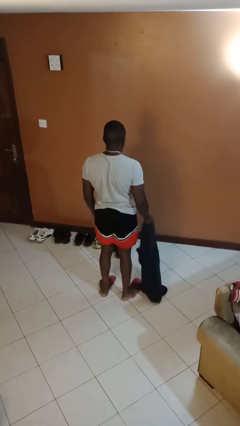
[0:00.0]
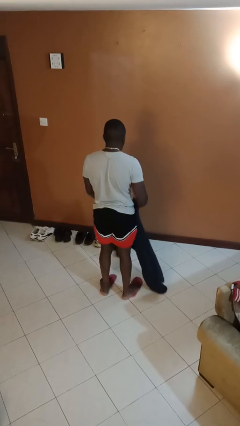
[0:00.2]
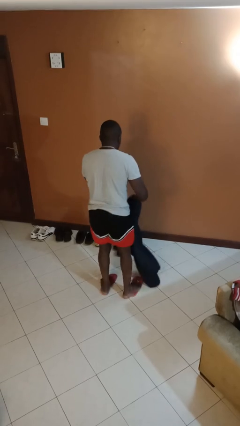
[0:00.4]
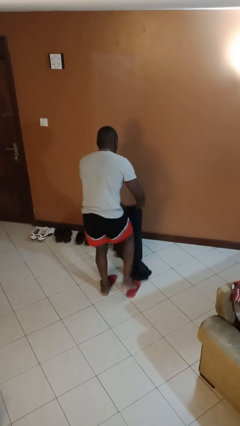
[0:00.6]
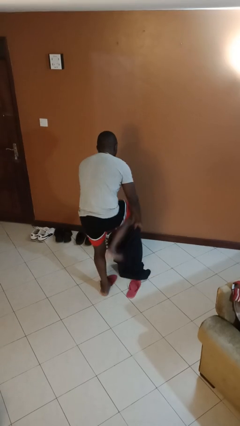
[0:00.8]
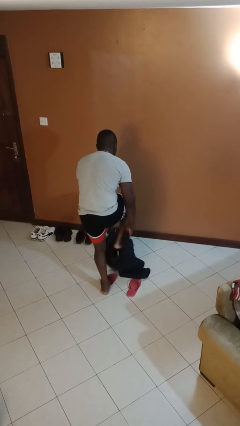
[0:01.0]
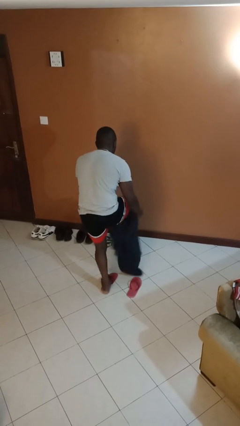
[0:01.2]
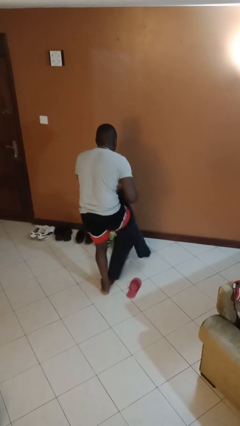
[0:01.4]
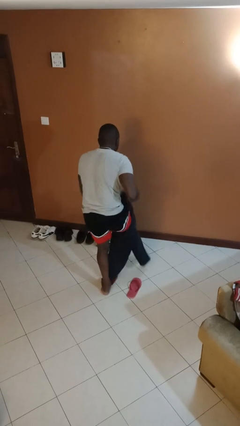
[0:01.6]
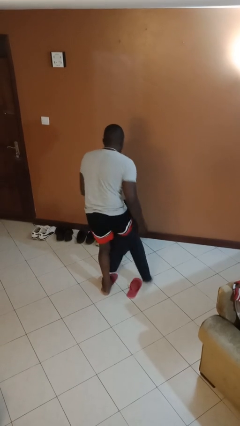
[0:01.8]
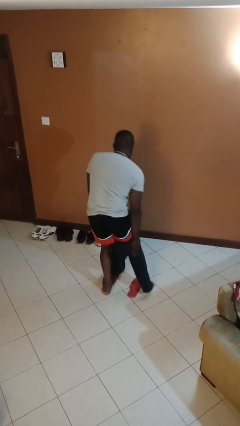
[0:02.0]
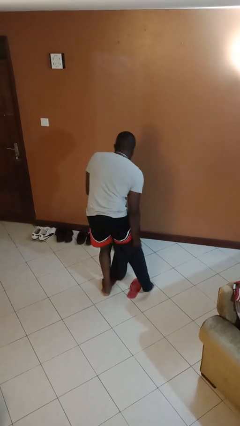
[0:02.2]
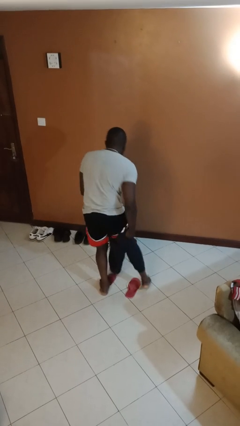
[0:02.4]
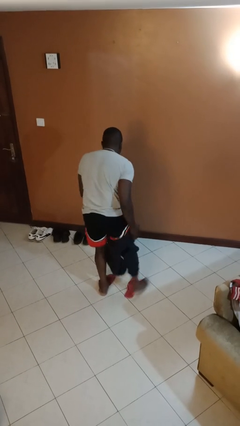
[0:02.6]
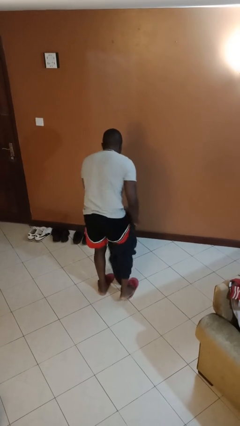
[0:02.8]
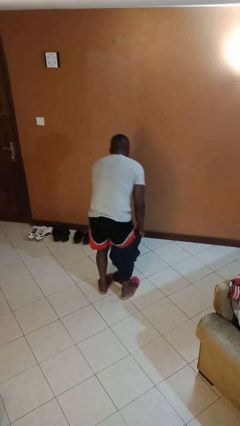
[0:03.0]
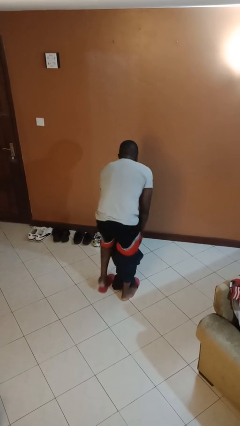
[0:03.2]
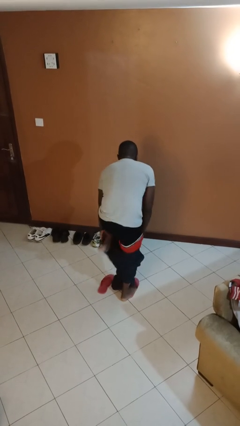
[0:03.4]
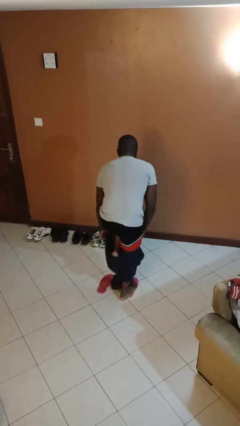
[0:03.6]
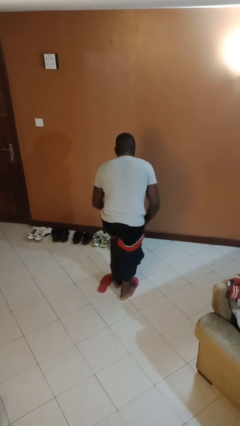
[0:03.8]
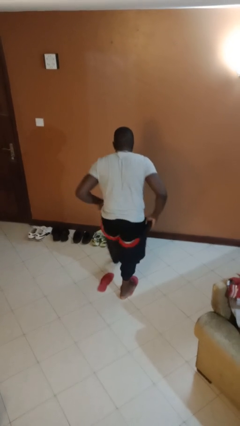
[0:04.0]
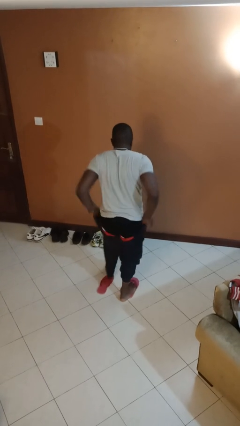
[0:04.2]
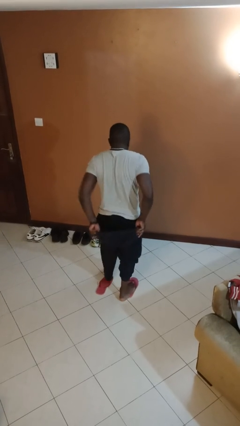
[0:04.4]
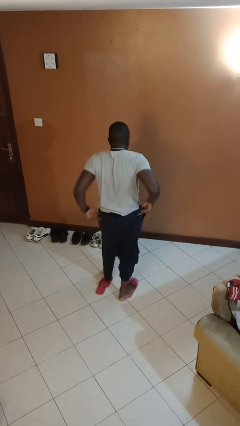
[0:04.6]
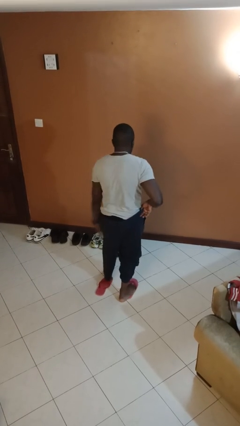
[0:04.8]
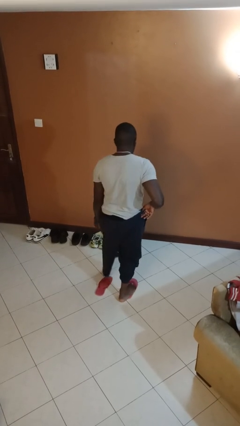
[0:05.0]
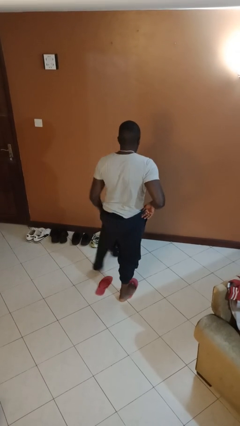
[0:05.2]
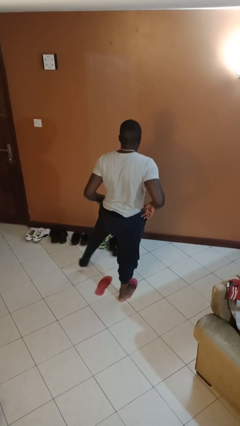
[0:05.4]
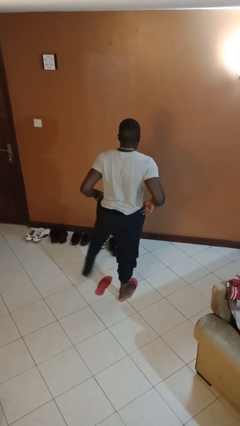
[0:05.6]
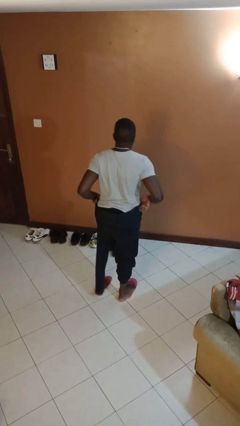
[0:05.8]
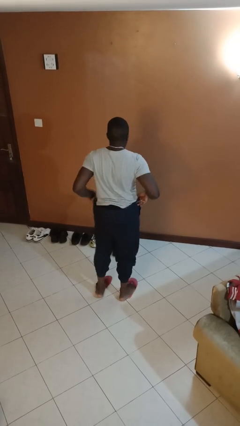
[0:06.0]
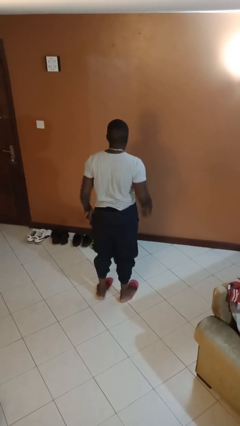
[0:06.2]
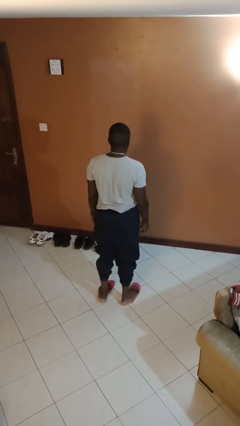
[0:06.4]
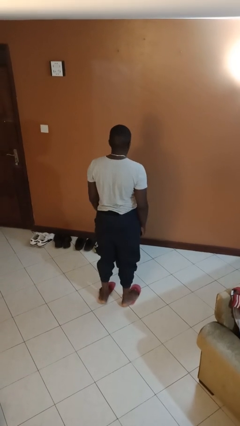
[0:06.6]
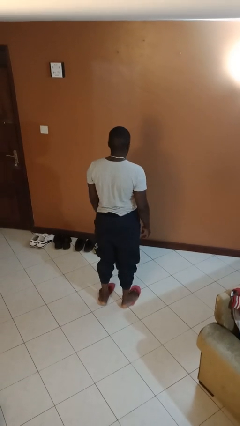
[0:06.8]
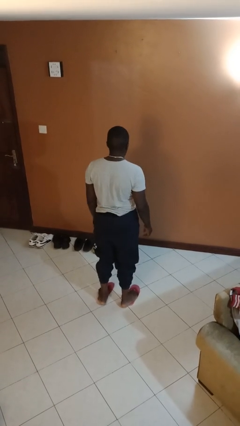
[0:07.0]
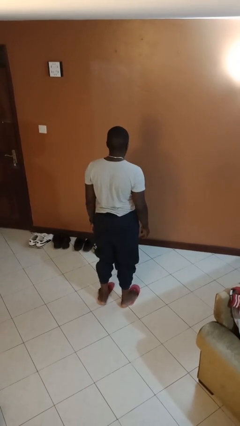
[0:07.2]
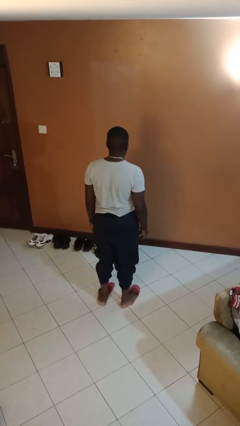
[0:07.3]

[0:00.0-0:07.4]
person puts on pants

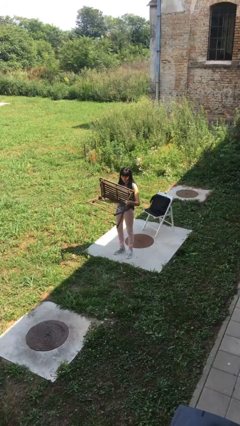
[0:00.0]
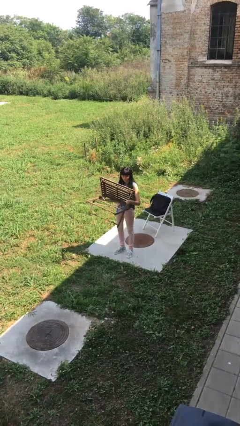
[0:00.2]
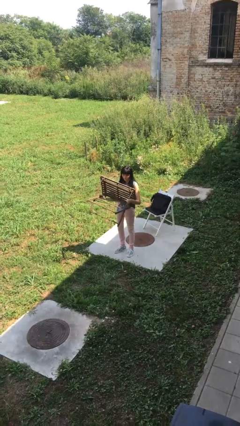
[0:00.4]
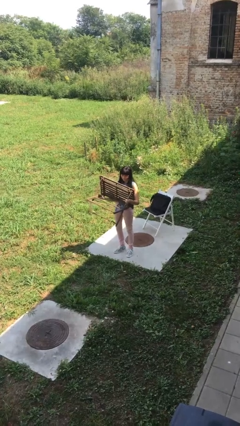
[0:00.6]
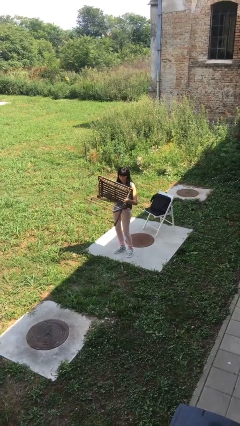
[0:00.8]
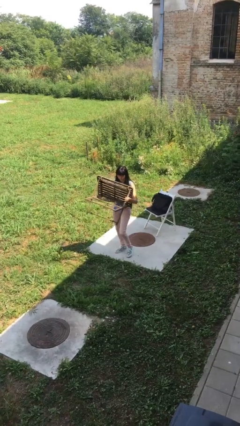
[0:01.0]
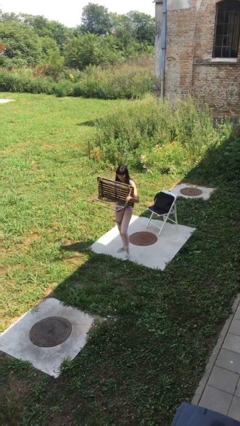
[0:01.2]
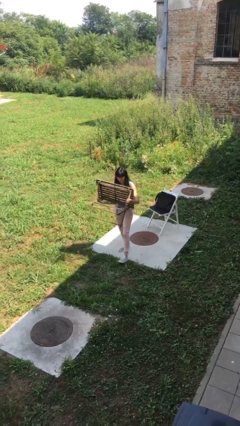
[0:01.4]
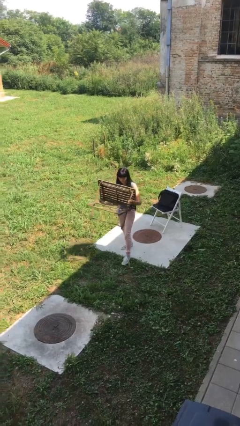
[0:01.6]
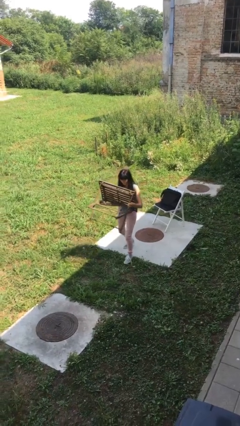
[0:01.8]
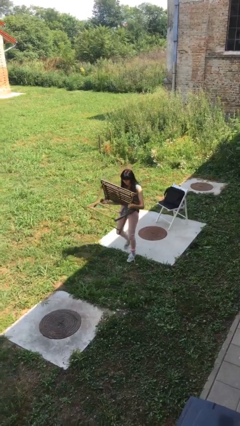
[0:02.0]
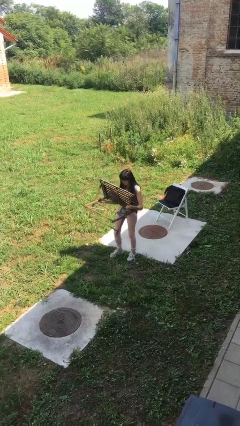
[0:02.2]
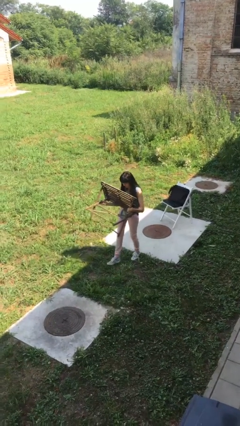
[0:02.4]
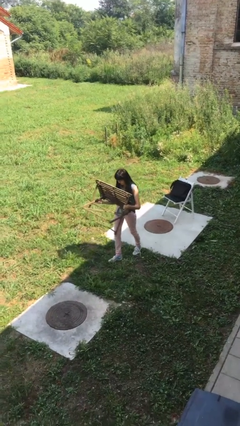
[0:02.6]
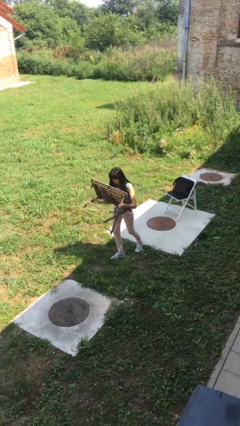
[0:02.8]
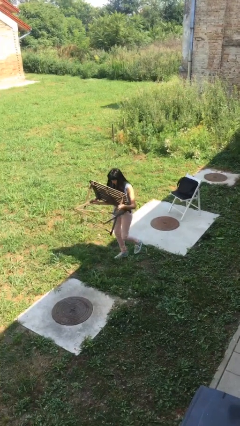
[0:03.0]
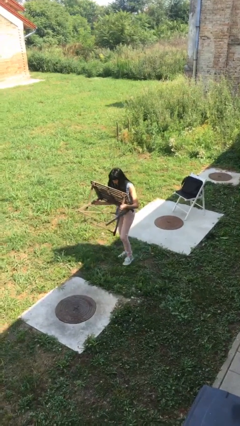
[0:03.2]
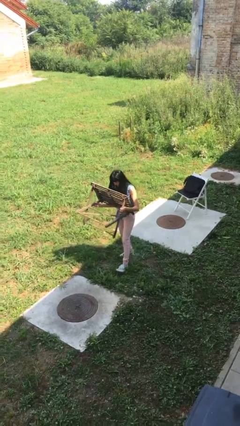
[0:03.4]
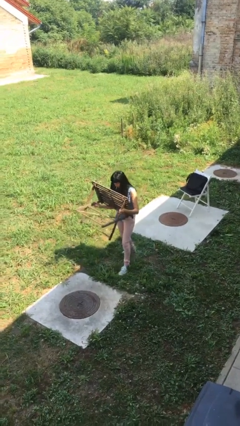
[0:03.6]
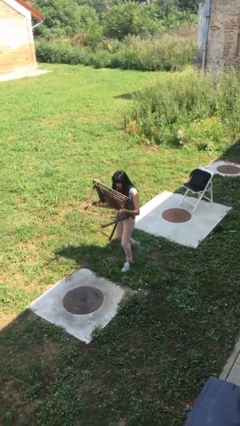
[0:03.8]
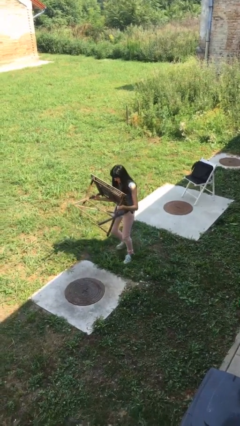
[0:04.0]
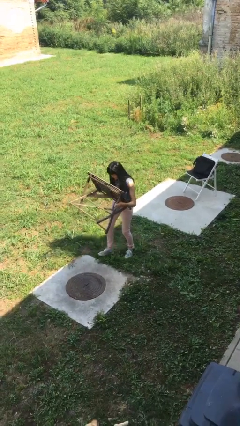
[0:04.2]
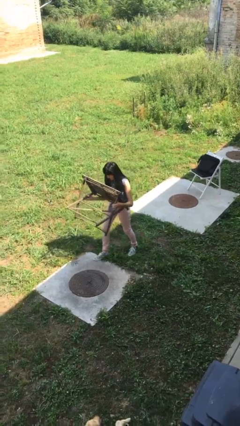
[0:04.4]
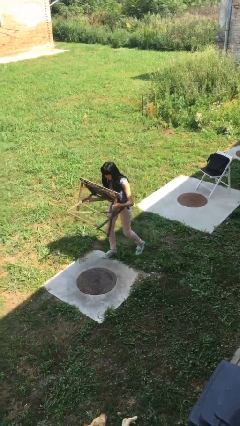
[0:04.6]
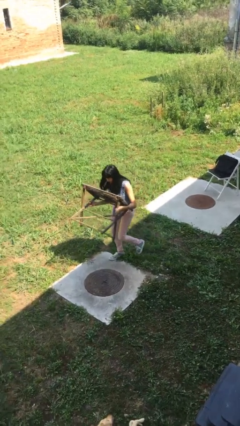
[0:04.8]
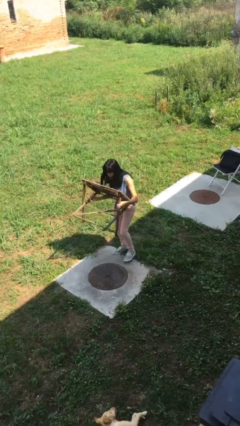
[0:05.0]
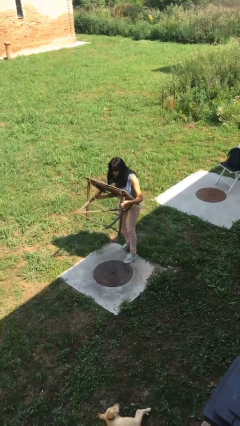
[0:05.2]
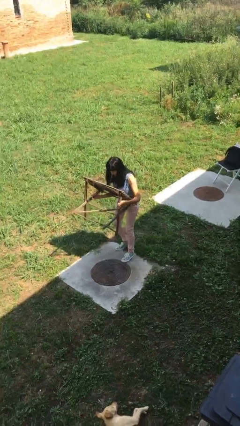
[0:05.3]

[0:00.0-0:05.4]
person carries heavy object

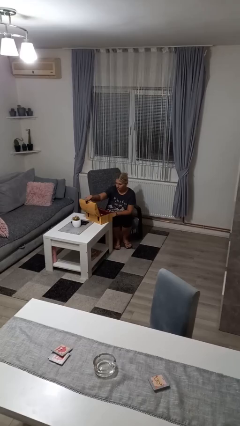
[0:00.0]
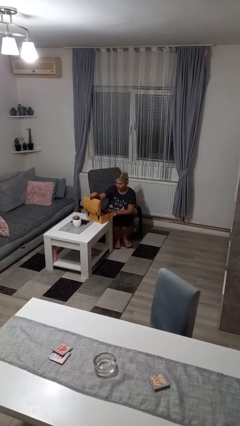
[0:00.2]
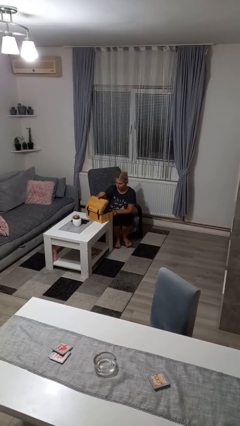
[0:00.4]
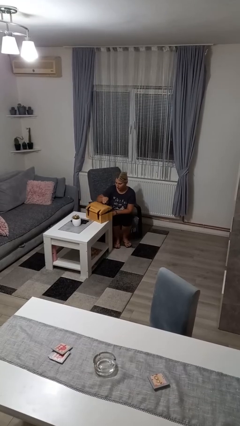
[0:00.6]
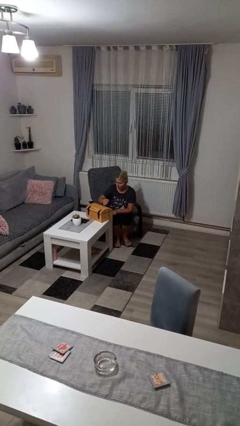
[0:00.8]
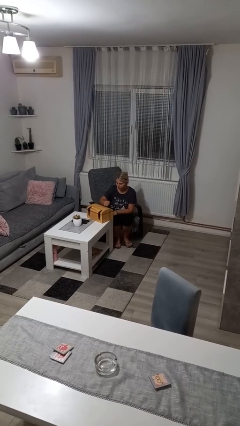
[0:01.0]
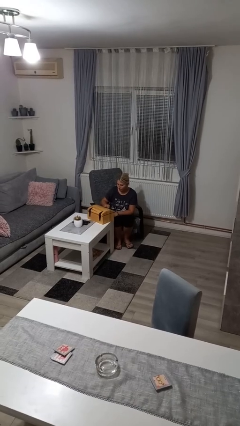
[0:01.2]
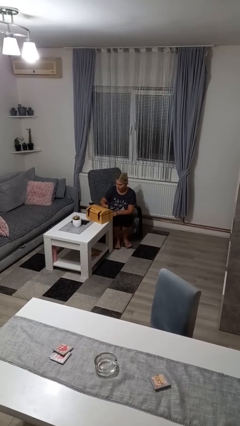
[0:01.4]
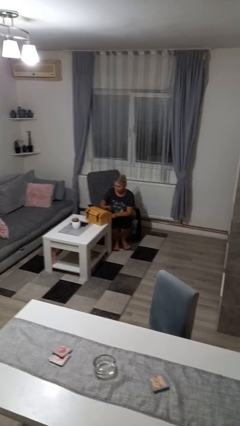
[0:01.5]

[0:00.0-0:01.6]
person closes jewelry box

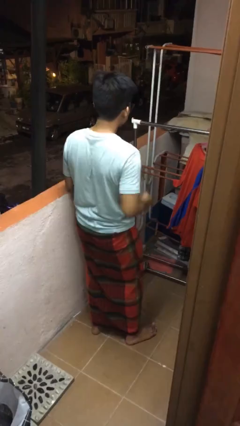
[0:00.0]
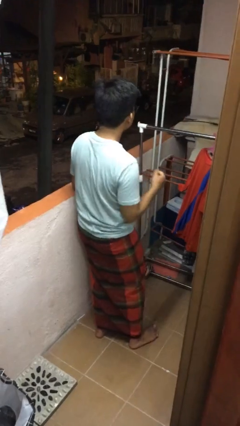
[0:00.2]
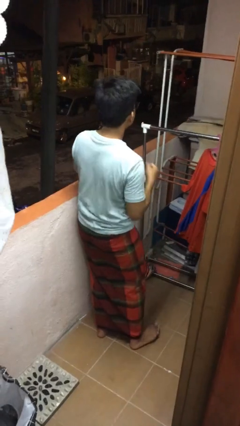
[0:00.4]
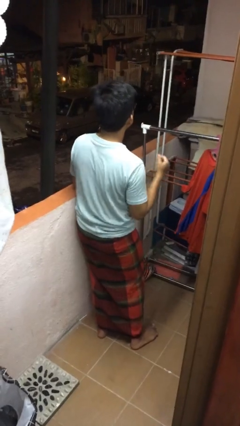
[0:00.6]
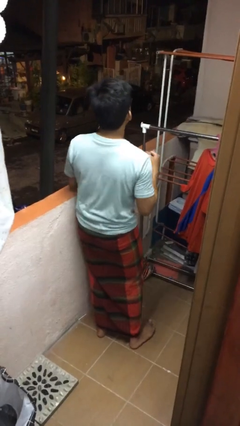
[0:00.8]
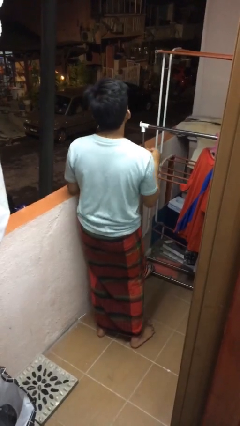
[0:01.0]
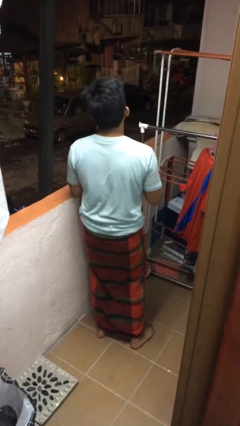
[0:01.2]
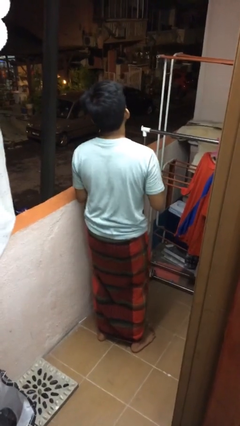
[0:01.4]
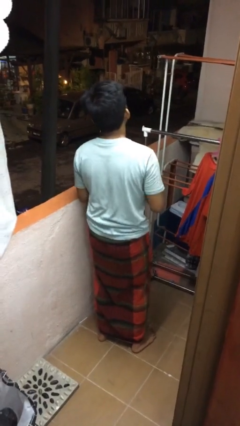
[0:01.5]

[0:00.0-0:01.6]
person dances in place

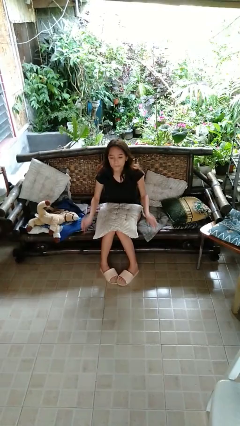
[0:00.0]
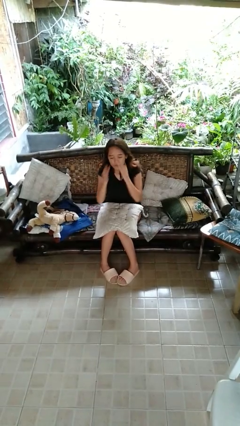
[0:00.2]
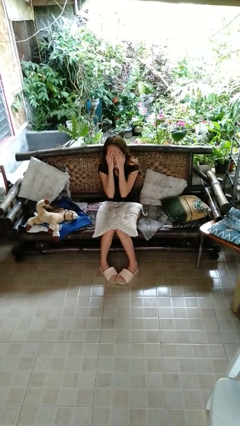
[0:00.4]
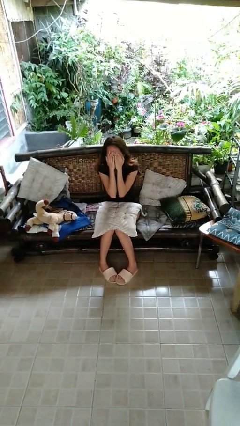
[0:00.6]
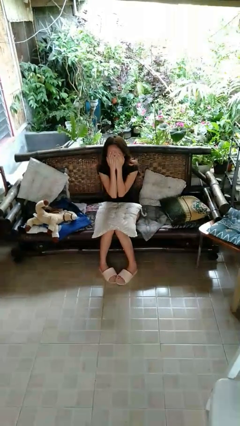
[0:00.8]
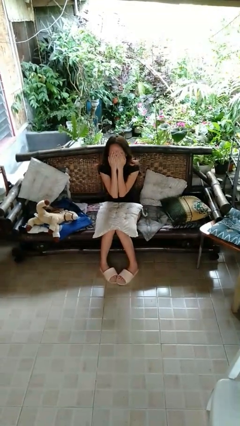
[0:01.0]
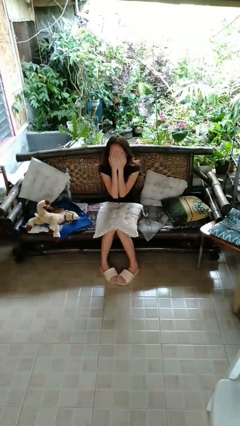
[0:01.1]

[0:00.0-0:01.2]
person covers face with hands

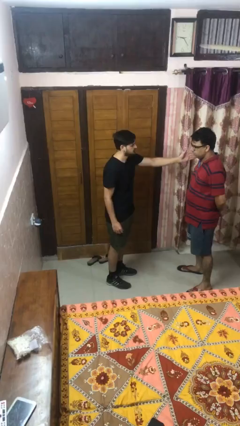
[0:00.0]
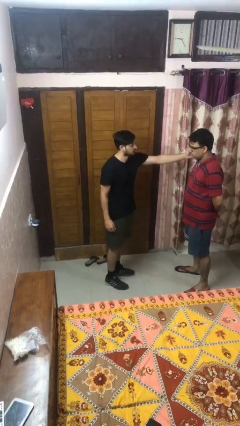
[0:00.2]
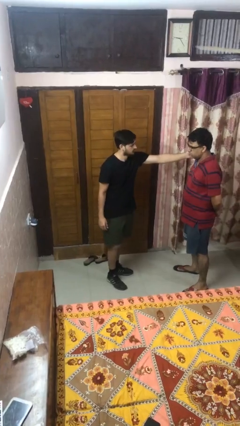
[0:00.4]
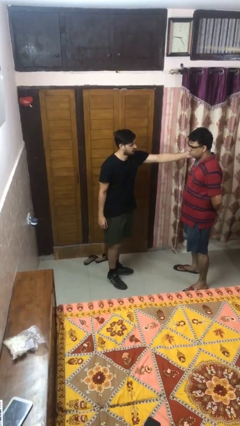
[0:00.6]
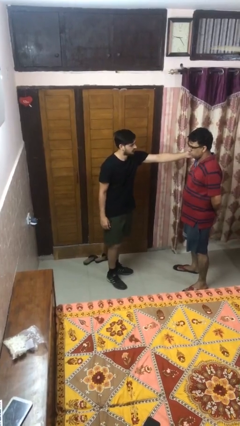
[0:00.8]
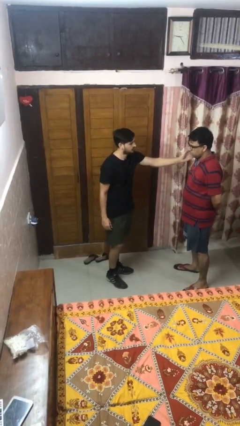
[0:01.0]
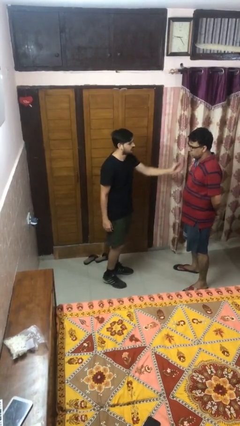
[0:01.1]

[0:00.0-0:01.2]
person touches face of person
